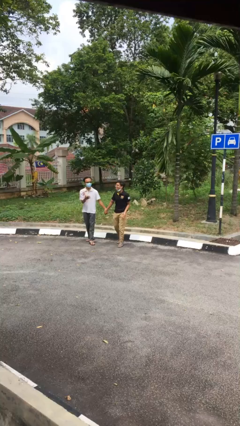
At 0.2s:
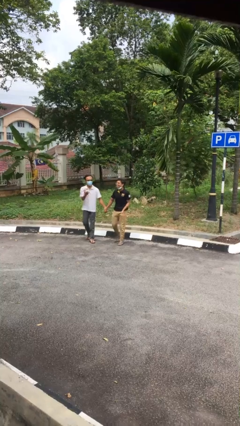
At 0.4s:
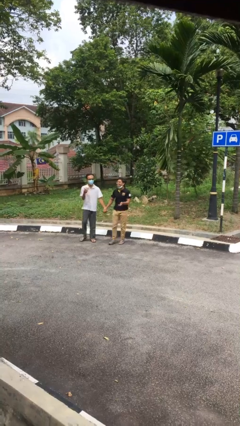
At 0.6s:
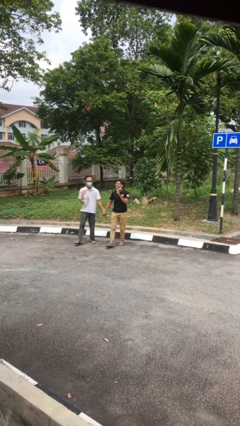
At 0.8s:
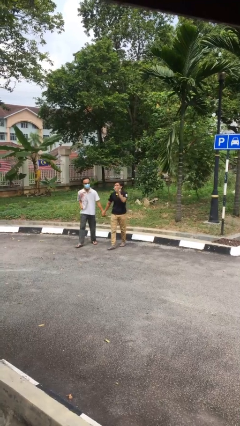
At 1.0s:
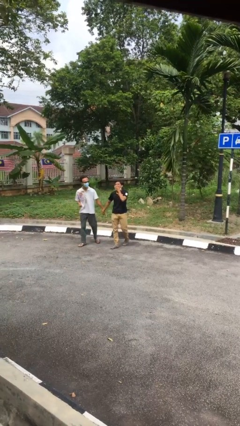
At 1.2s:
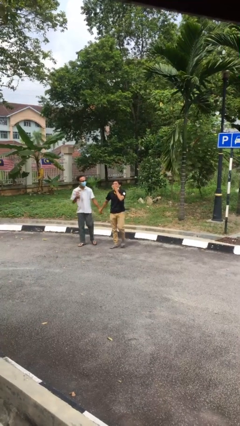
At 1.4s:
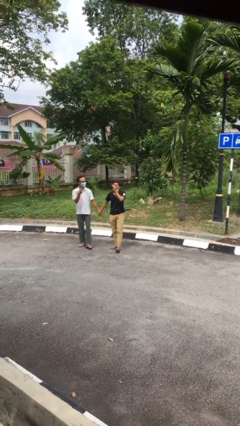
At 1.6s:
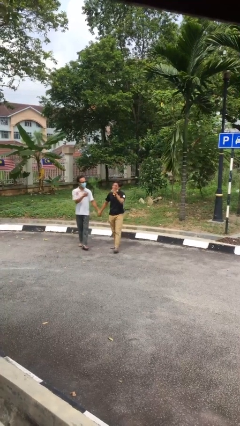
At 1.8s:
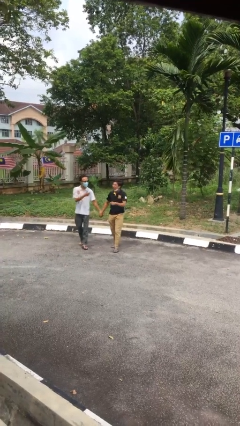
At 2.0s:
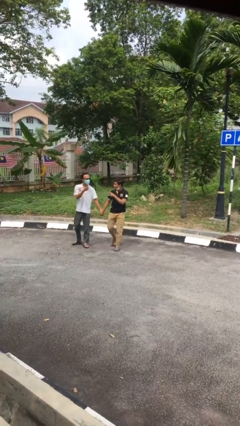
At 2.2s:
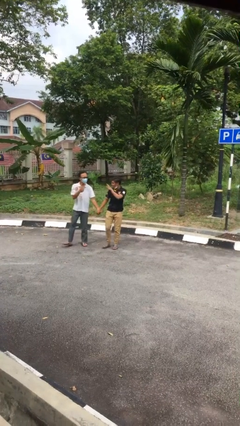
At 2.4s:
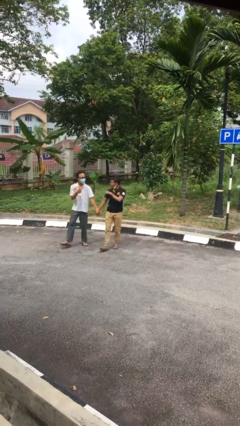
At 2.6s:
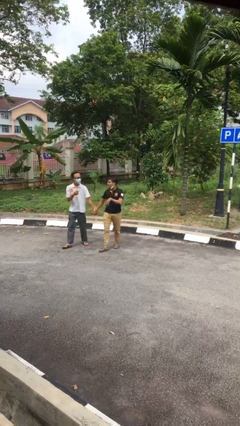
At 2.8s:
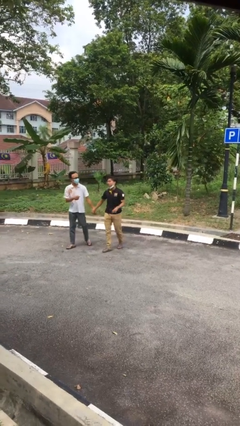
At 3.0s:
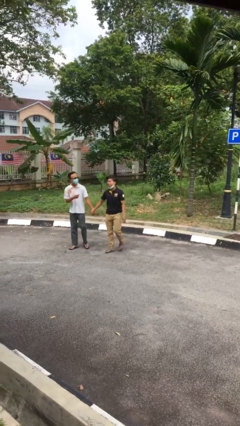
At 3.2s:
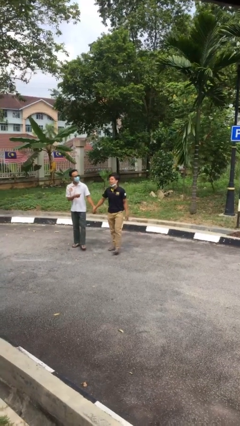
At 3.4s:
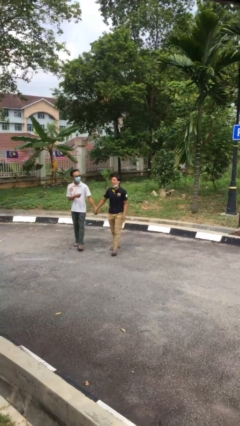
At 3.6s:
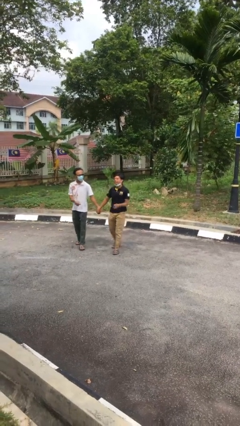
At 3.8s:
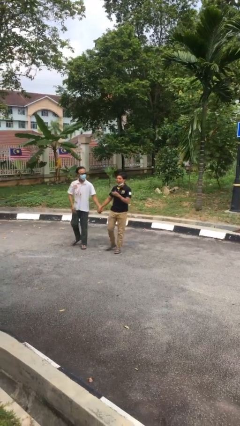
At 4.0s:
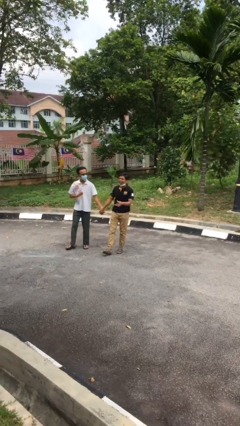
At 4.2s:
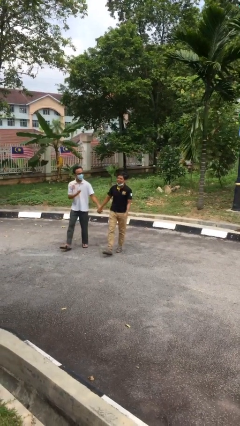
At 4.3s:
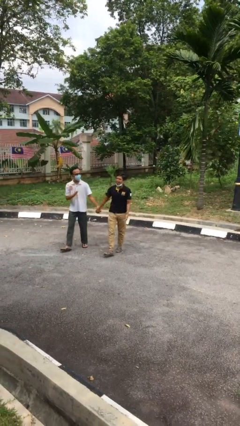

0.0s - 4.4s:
person holds hand

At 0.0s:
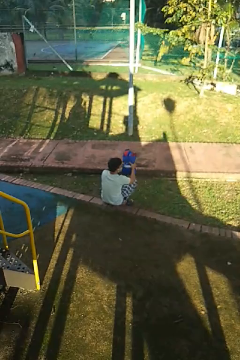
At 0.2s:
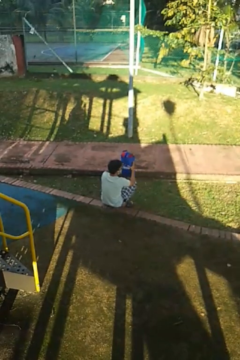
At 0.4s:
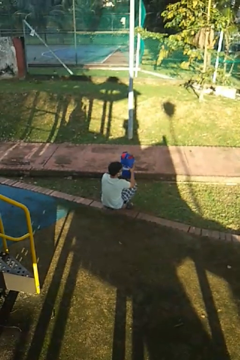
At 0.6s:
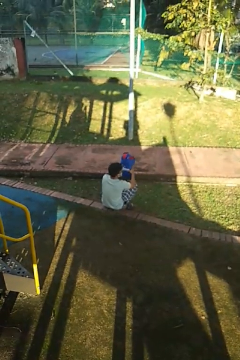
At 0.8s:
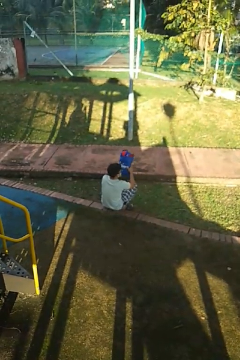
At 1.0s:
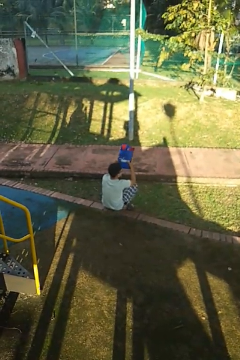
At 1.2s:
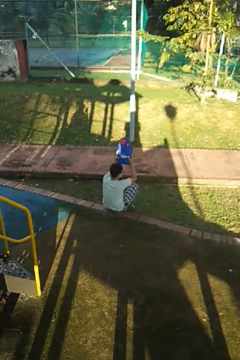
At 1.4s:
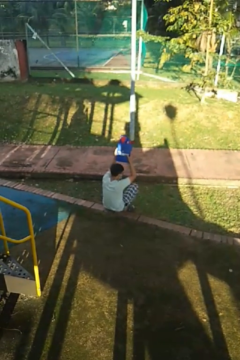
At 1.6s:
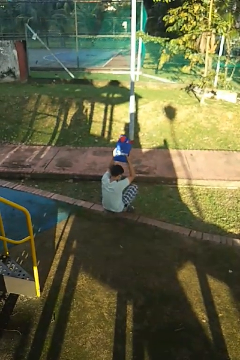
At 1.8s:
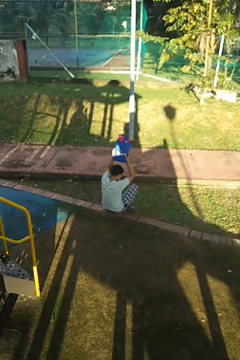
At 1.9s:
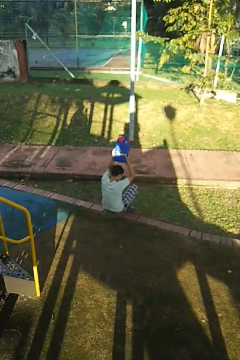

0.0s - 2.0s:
person holds object above head

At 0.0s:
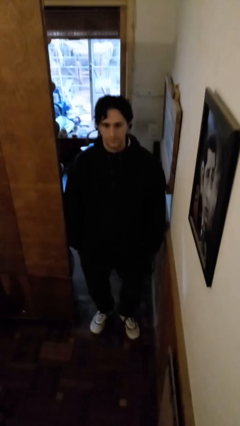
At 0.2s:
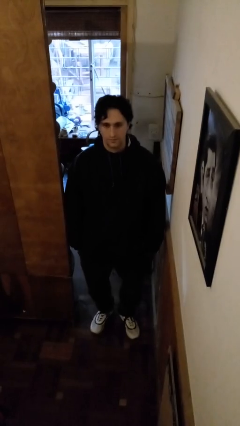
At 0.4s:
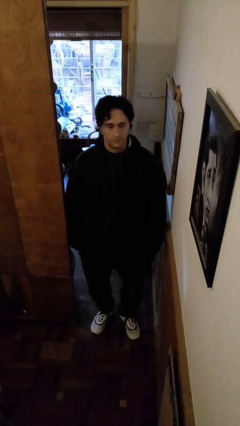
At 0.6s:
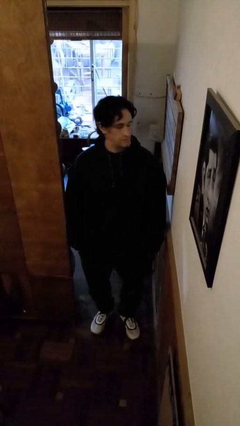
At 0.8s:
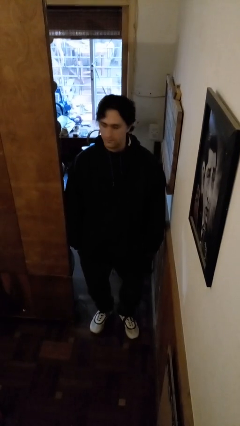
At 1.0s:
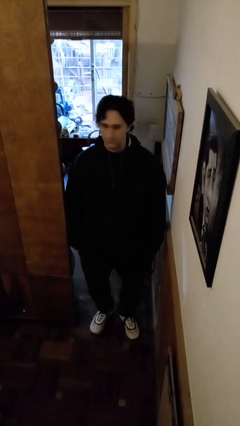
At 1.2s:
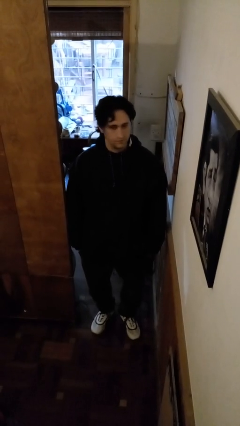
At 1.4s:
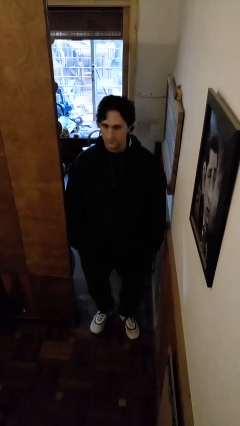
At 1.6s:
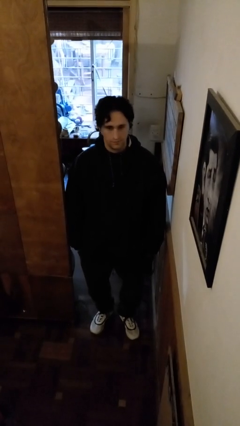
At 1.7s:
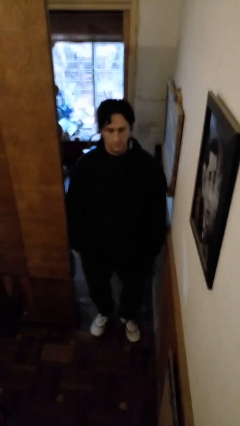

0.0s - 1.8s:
person shakes head

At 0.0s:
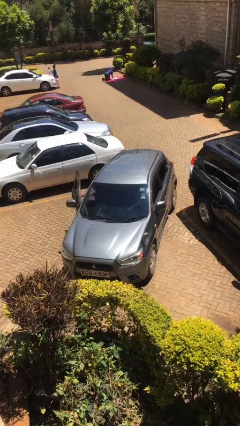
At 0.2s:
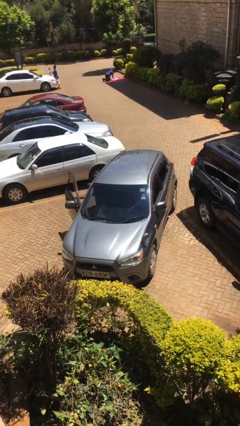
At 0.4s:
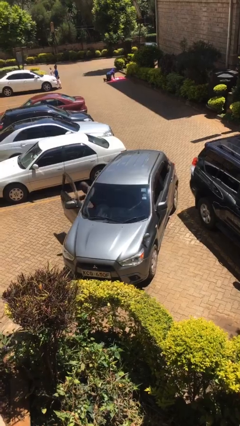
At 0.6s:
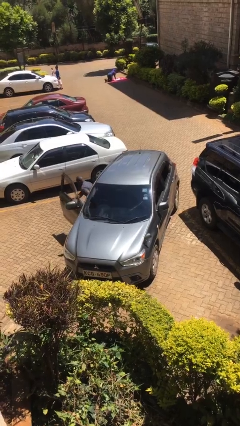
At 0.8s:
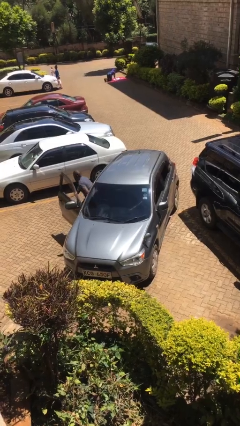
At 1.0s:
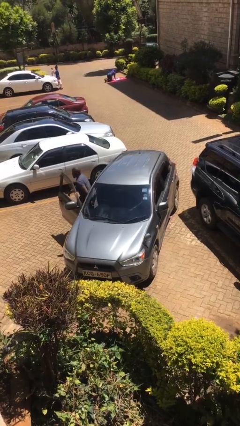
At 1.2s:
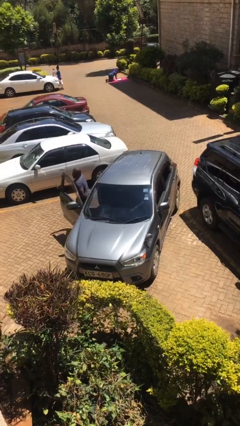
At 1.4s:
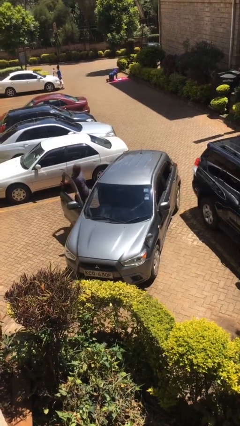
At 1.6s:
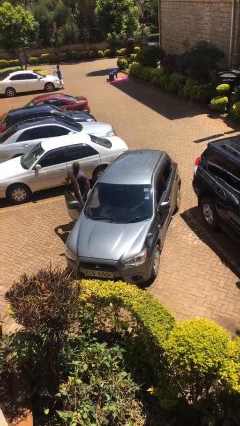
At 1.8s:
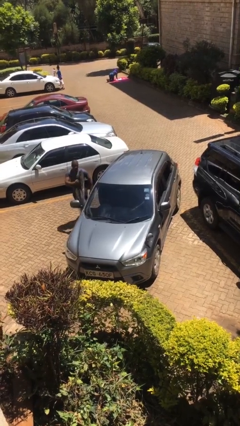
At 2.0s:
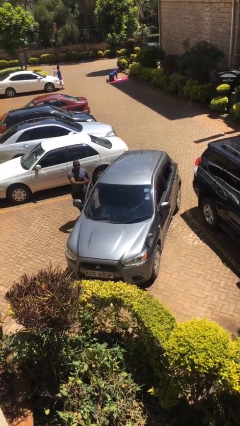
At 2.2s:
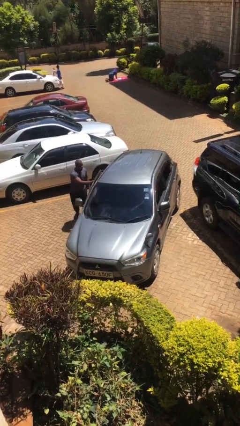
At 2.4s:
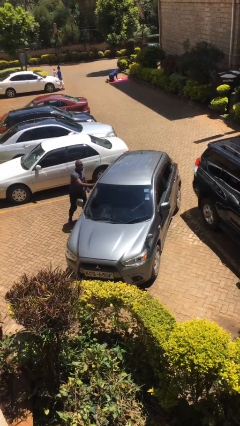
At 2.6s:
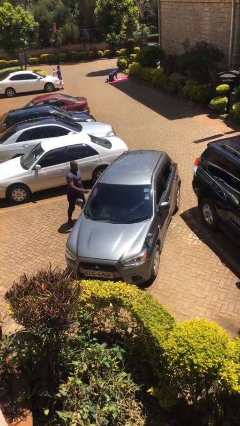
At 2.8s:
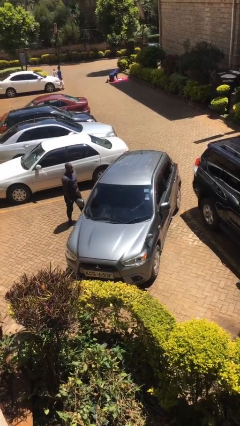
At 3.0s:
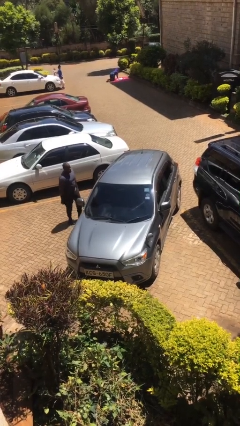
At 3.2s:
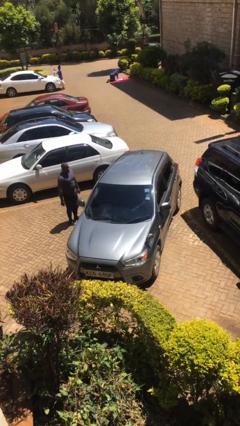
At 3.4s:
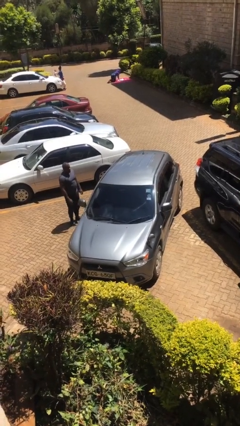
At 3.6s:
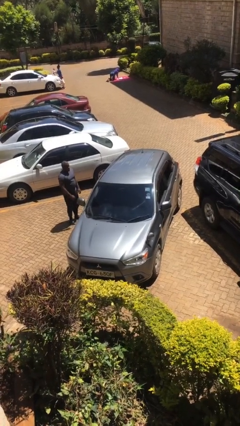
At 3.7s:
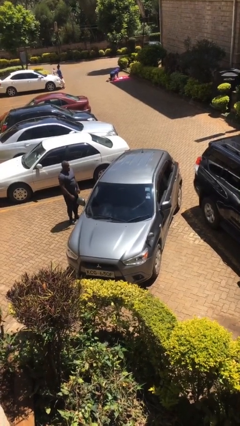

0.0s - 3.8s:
car drops off person

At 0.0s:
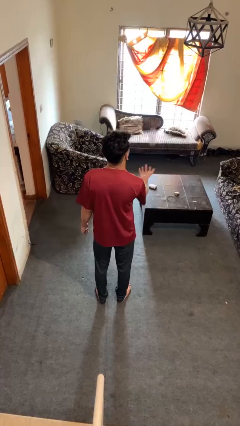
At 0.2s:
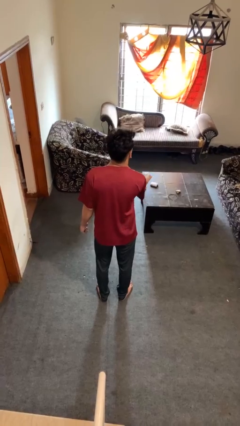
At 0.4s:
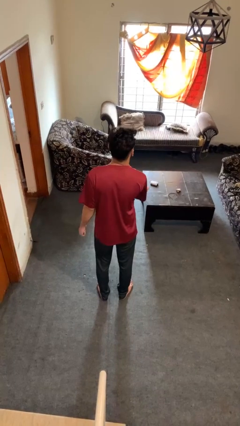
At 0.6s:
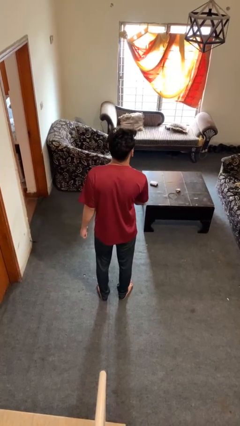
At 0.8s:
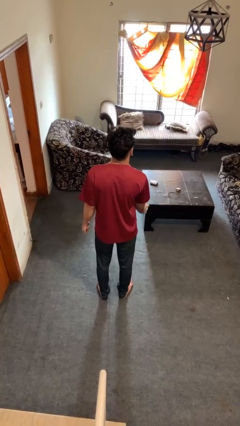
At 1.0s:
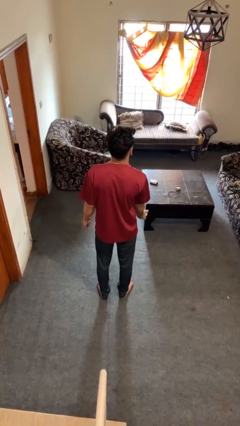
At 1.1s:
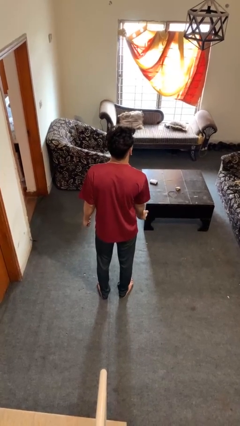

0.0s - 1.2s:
person catches dropped object

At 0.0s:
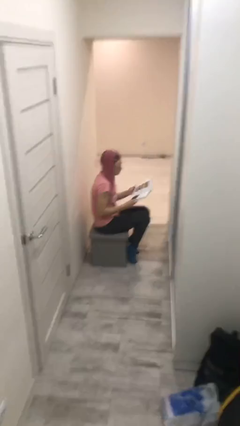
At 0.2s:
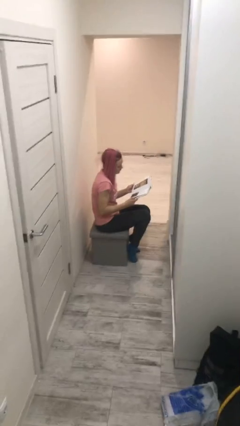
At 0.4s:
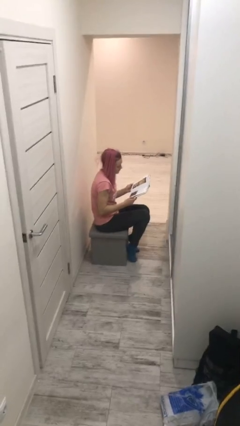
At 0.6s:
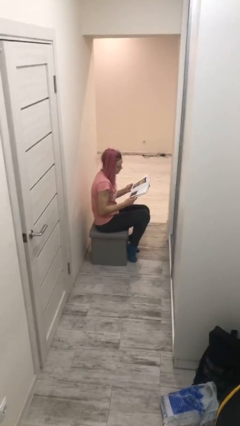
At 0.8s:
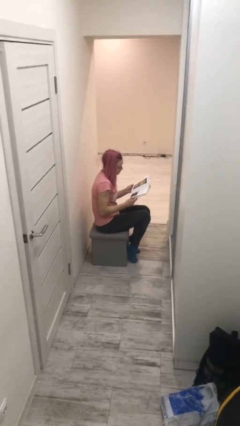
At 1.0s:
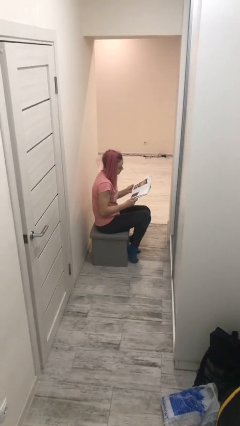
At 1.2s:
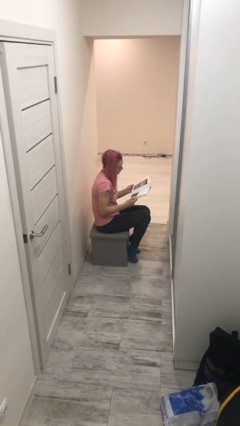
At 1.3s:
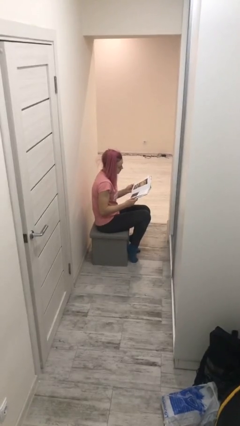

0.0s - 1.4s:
person reads document

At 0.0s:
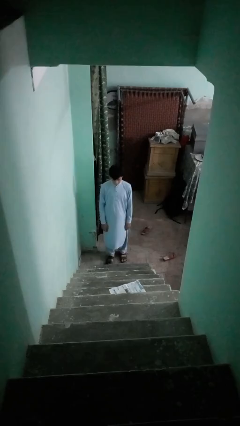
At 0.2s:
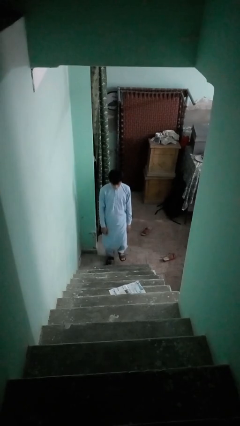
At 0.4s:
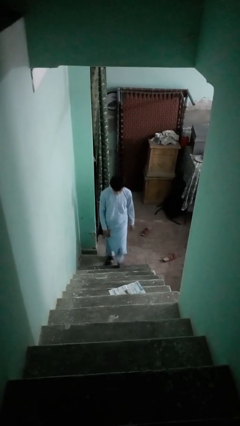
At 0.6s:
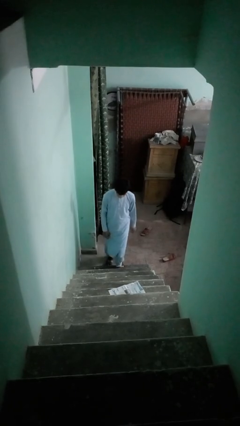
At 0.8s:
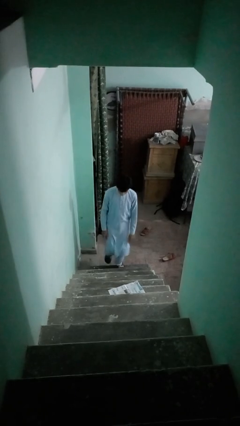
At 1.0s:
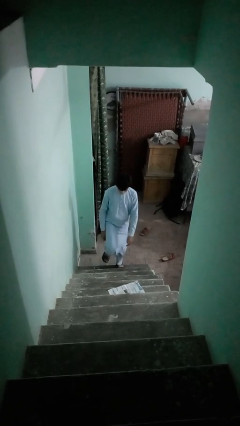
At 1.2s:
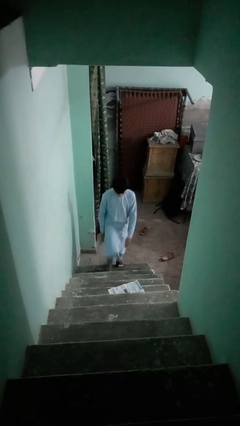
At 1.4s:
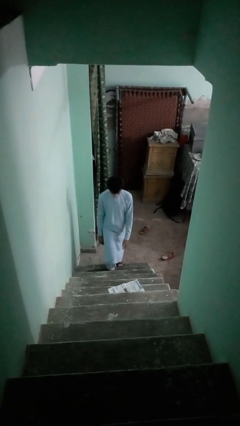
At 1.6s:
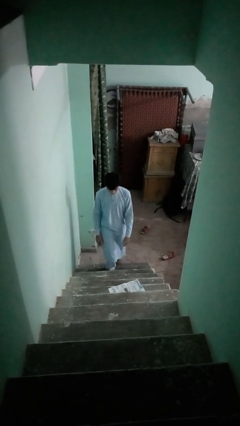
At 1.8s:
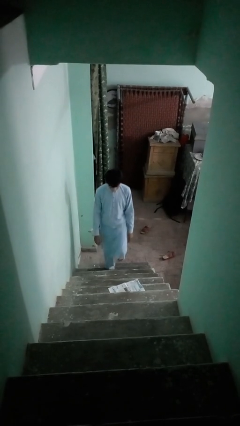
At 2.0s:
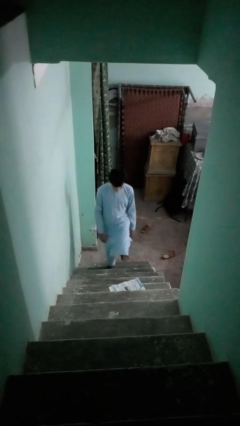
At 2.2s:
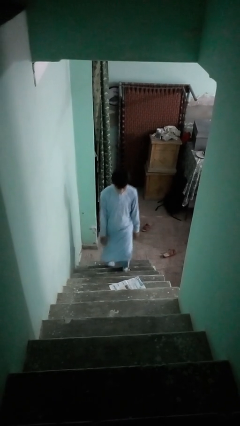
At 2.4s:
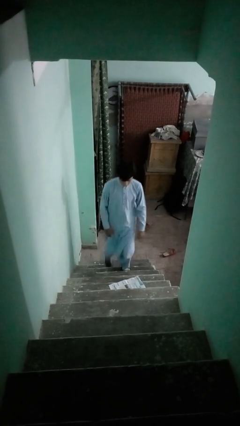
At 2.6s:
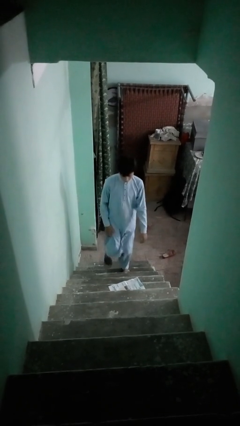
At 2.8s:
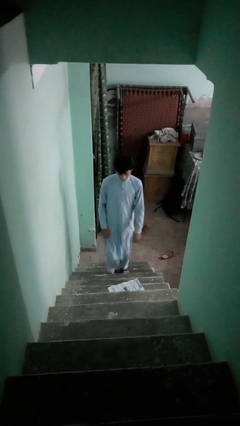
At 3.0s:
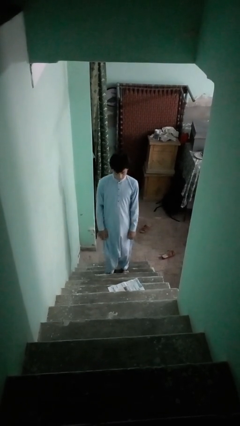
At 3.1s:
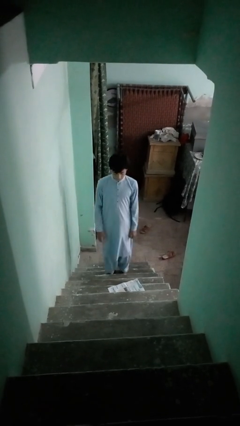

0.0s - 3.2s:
person climbs up stairs
